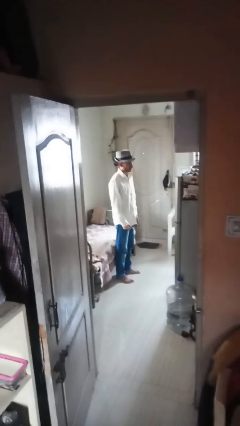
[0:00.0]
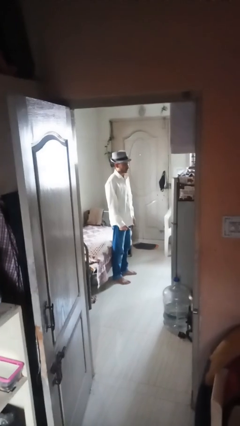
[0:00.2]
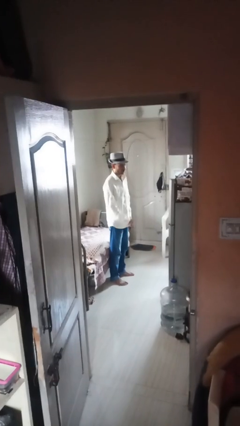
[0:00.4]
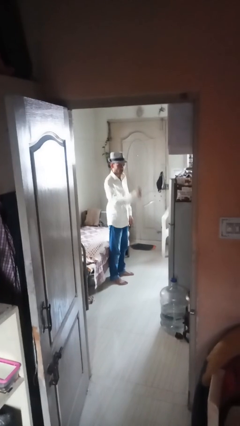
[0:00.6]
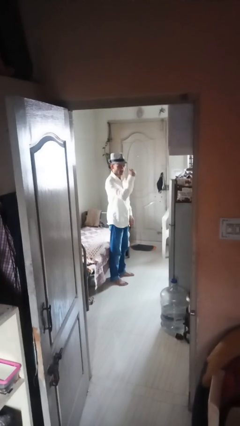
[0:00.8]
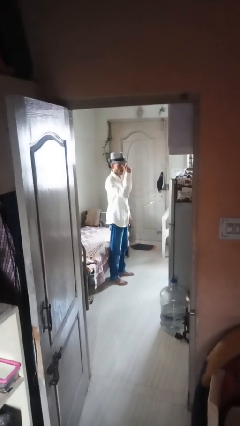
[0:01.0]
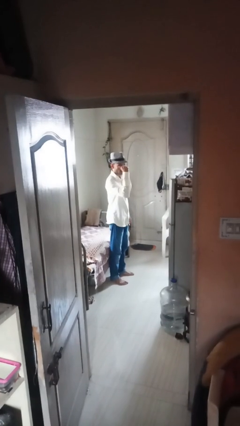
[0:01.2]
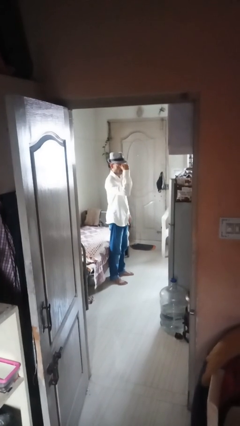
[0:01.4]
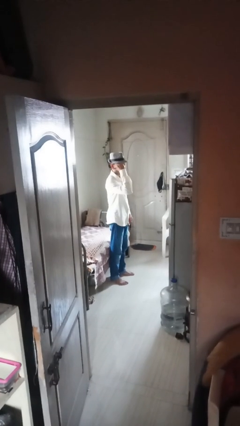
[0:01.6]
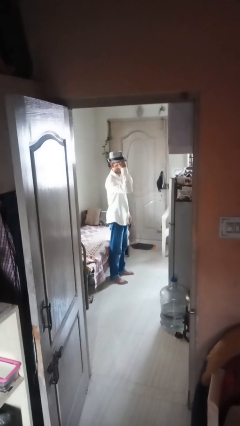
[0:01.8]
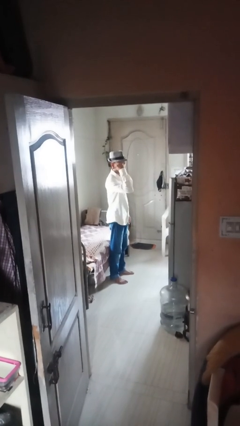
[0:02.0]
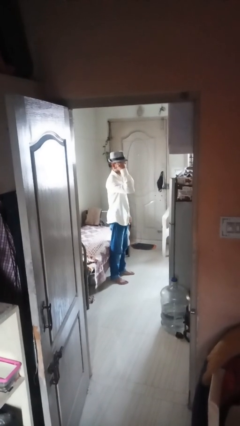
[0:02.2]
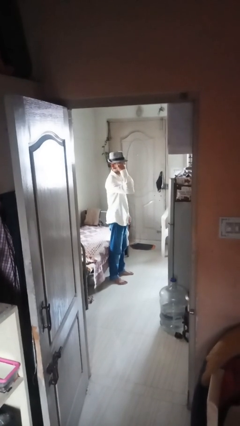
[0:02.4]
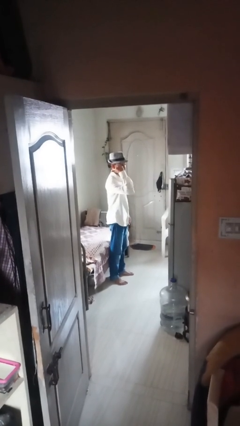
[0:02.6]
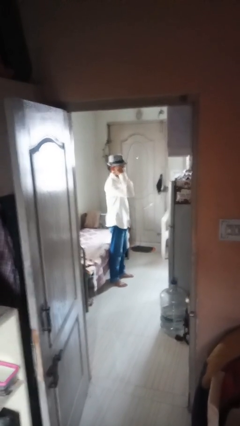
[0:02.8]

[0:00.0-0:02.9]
person gestures behind me

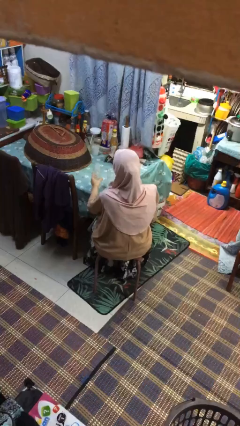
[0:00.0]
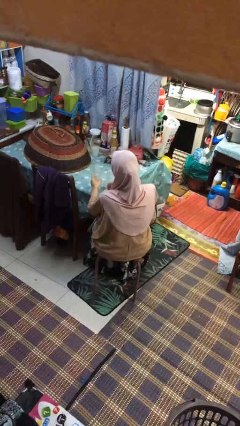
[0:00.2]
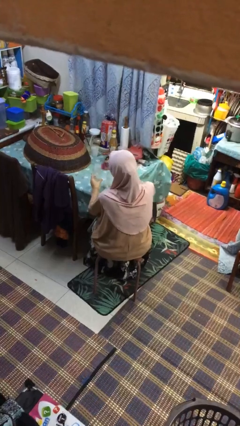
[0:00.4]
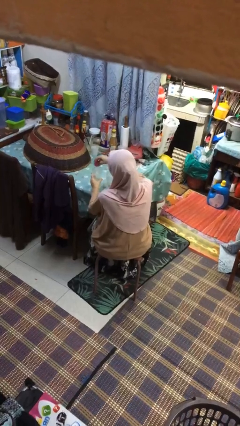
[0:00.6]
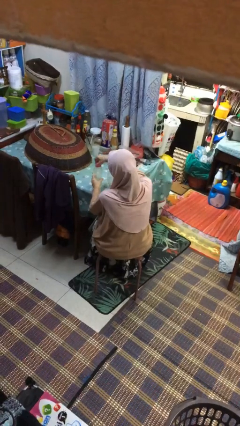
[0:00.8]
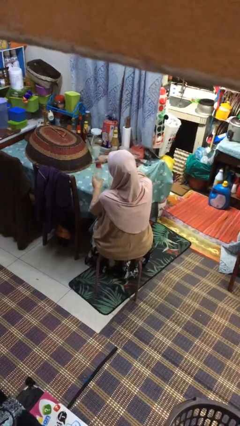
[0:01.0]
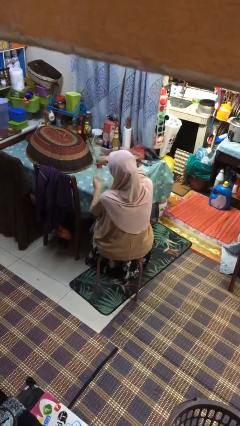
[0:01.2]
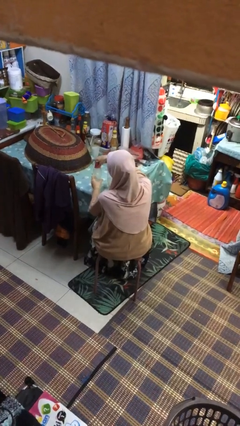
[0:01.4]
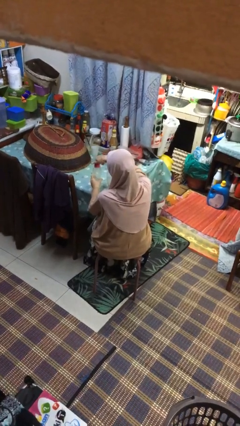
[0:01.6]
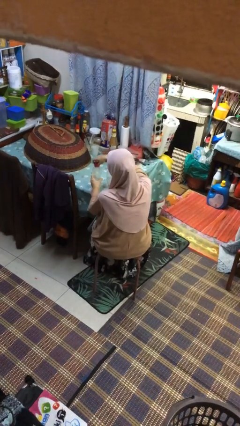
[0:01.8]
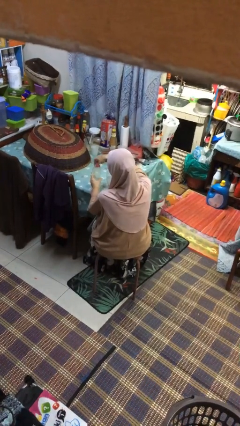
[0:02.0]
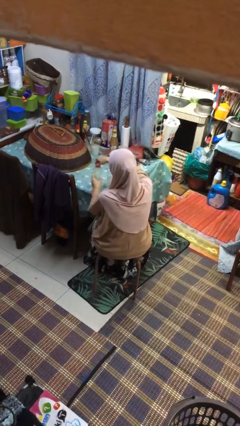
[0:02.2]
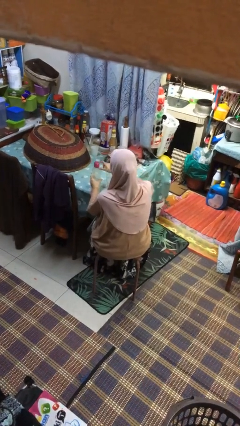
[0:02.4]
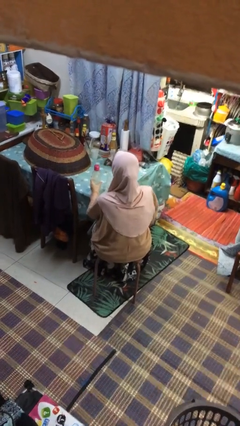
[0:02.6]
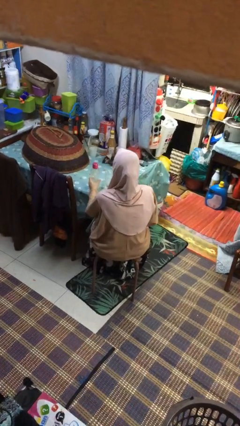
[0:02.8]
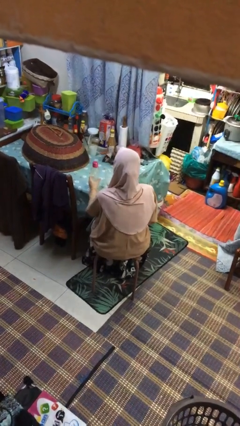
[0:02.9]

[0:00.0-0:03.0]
person screws lid to bottle

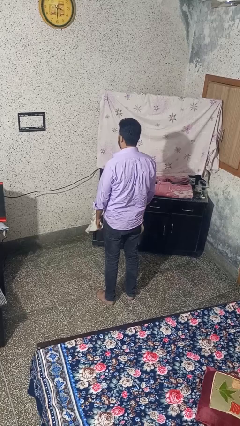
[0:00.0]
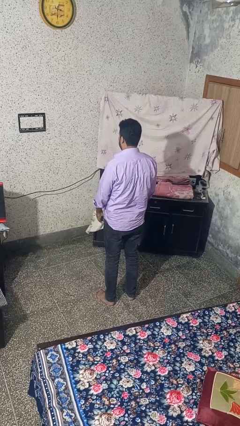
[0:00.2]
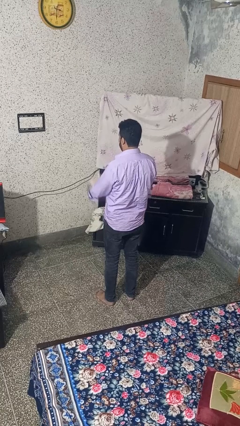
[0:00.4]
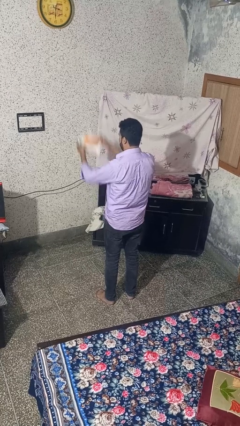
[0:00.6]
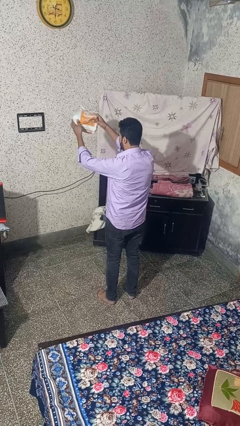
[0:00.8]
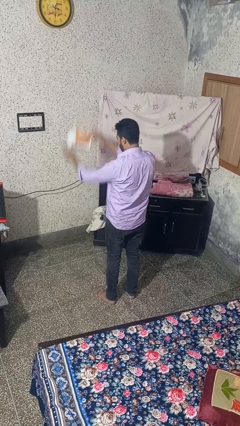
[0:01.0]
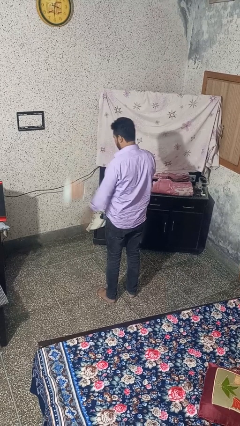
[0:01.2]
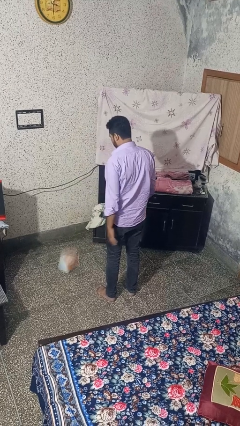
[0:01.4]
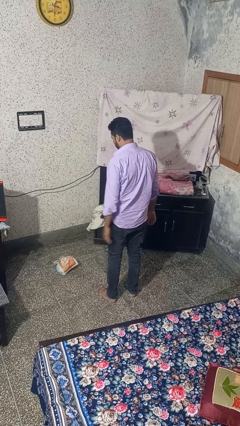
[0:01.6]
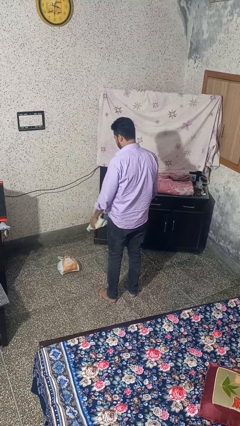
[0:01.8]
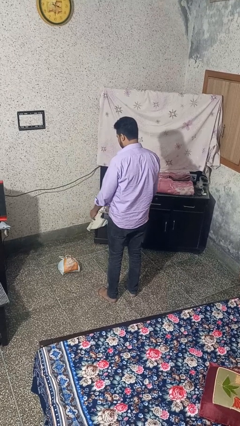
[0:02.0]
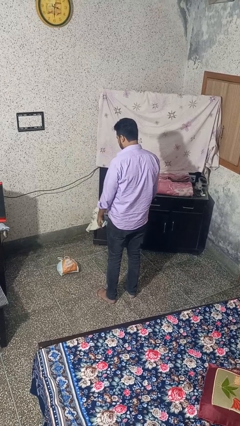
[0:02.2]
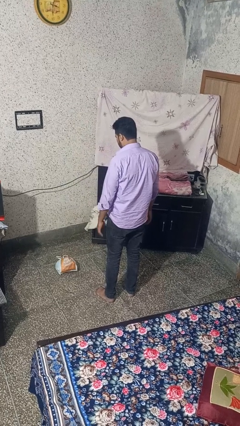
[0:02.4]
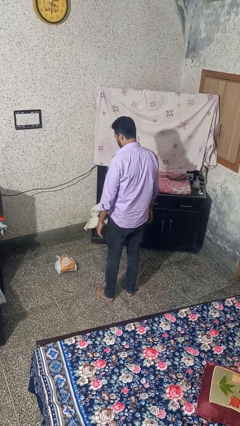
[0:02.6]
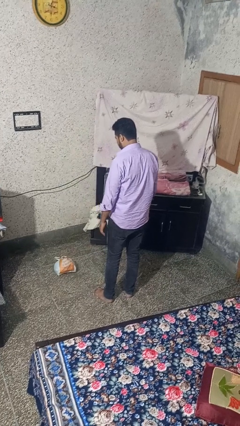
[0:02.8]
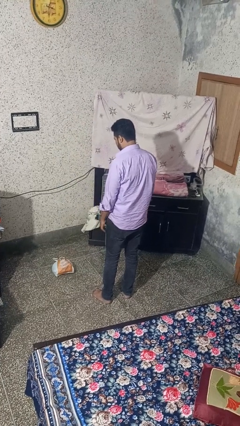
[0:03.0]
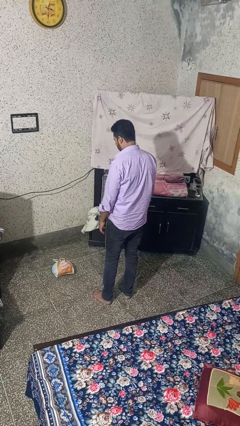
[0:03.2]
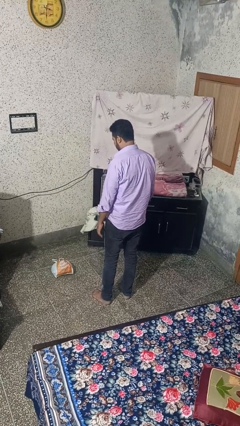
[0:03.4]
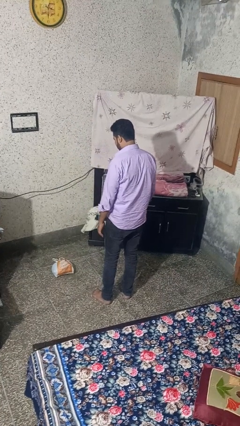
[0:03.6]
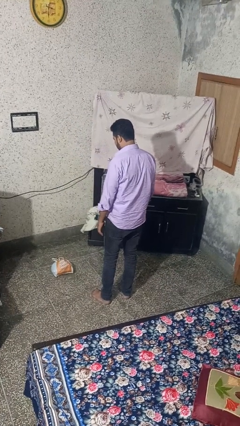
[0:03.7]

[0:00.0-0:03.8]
person throws object to ground

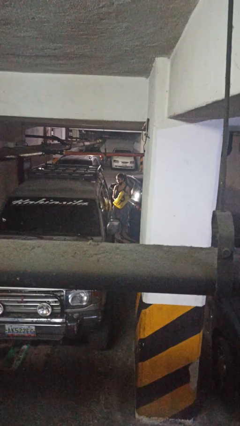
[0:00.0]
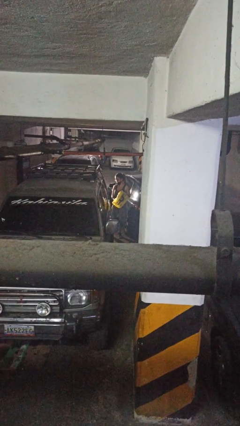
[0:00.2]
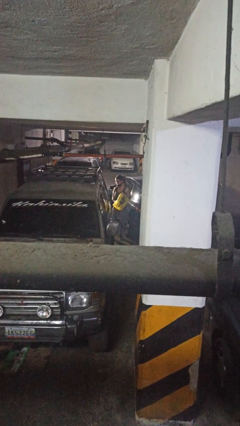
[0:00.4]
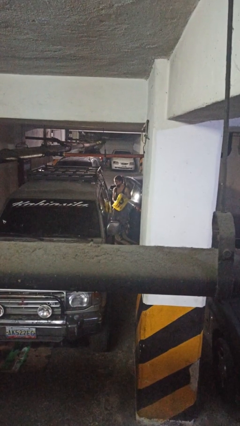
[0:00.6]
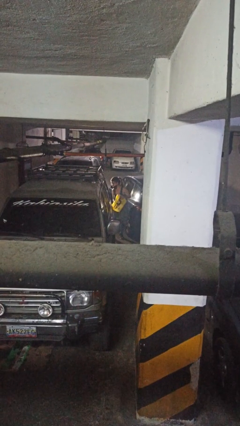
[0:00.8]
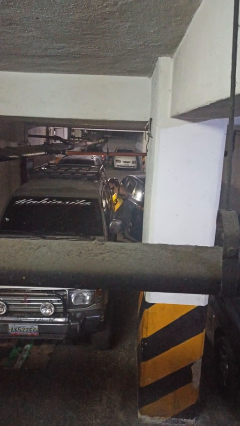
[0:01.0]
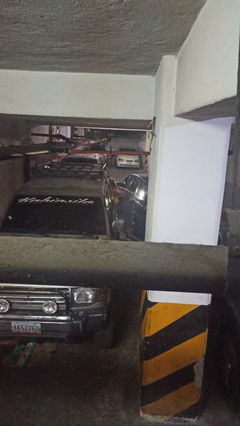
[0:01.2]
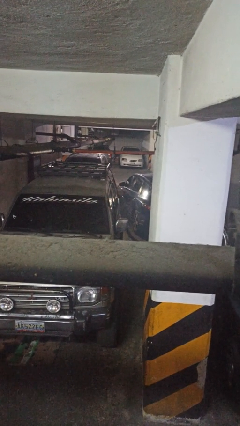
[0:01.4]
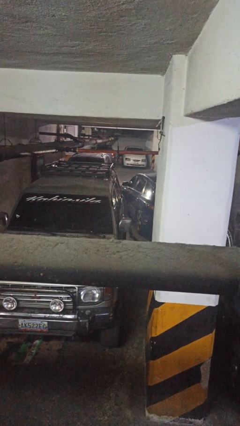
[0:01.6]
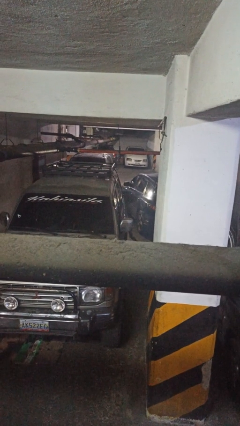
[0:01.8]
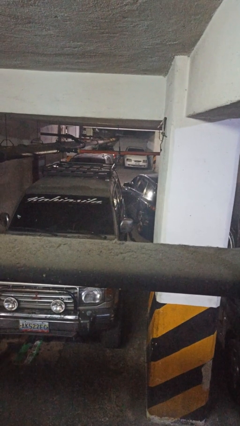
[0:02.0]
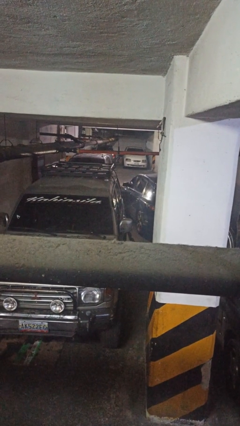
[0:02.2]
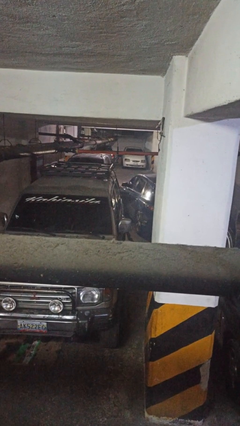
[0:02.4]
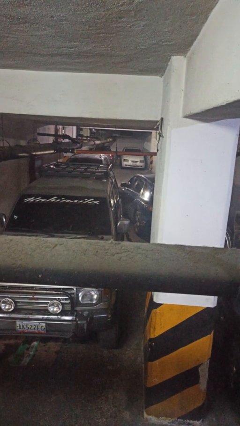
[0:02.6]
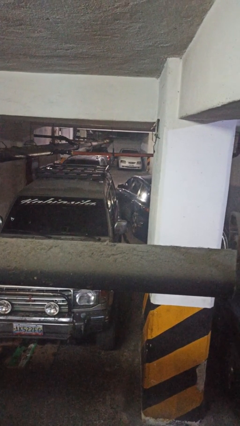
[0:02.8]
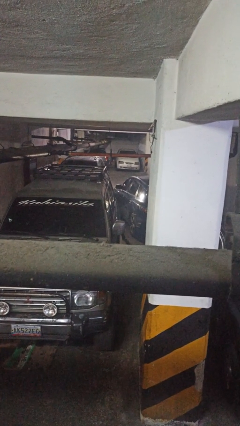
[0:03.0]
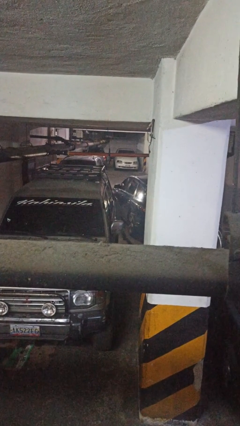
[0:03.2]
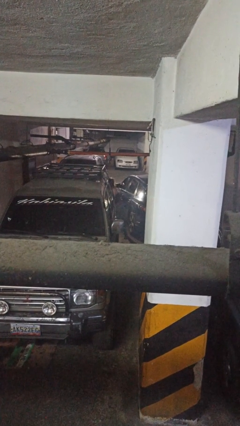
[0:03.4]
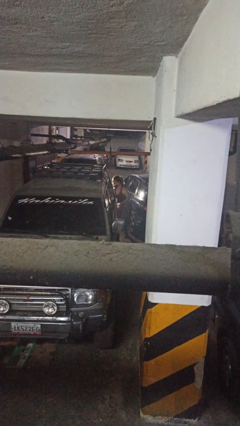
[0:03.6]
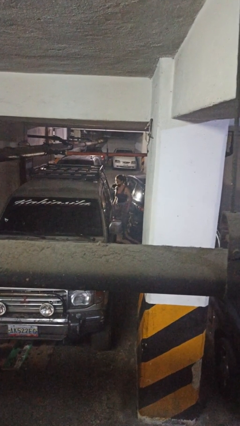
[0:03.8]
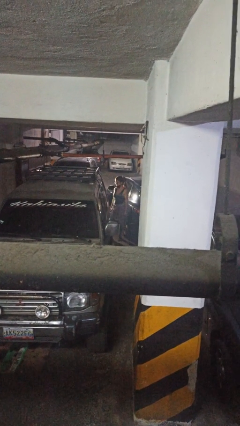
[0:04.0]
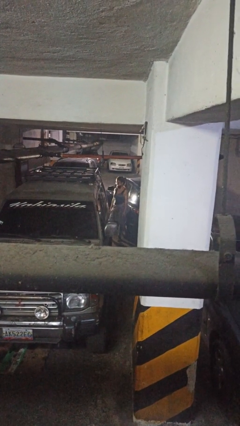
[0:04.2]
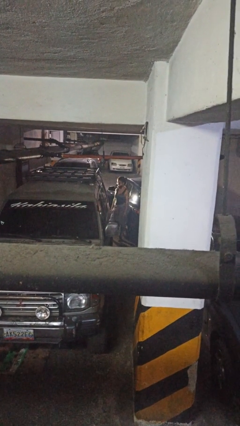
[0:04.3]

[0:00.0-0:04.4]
person loads car

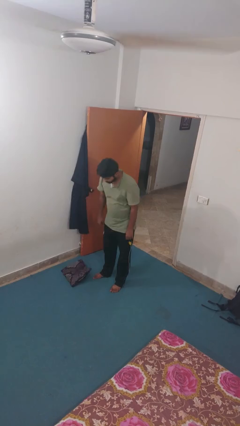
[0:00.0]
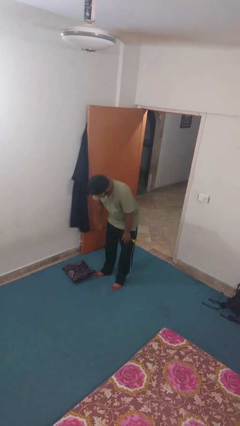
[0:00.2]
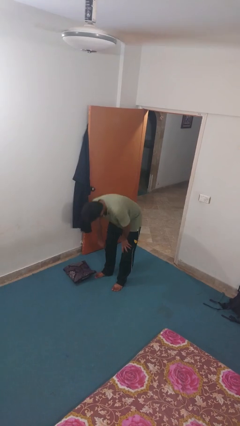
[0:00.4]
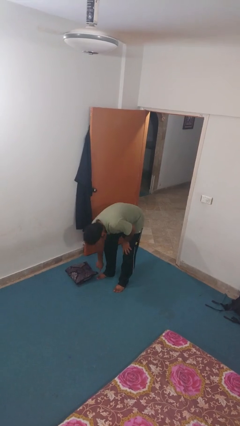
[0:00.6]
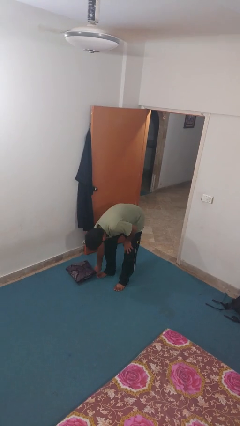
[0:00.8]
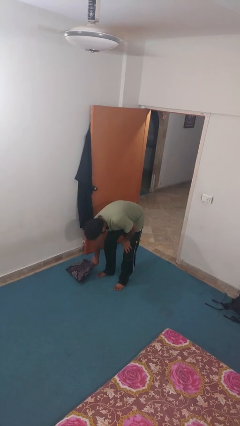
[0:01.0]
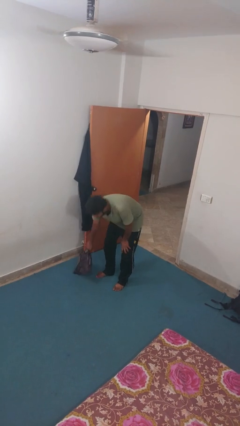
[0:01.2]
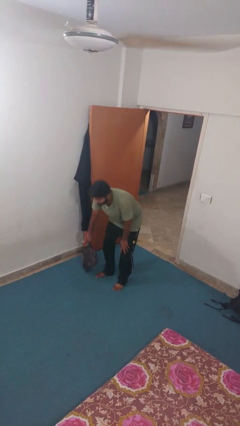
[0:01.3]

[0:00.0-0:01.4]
person picks up object from floor

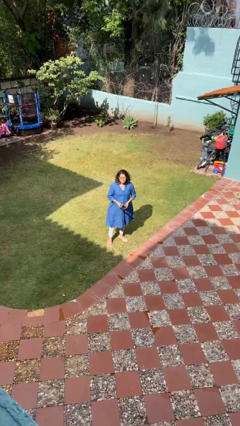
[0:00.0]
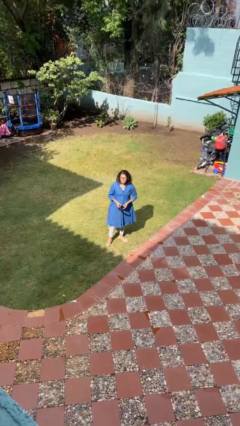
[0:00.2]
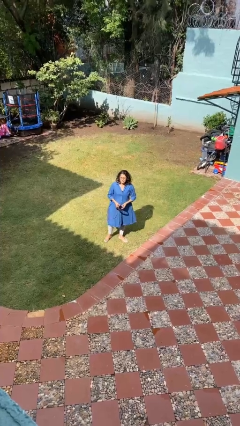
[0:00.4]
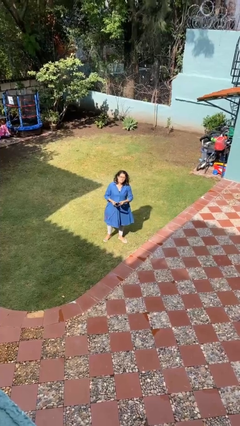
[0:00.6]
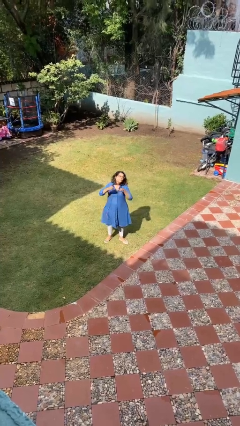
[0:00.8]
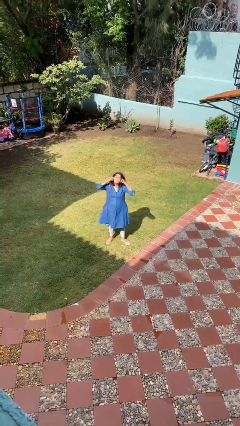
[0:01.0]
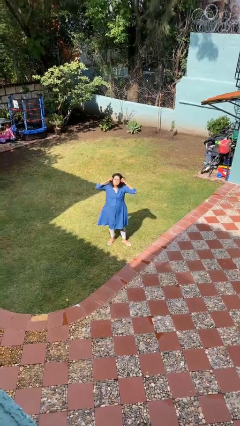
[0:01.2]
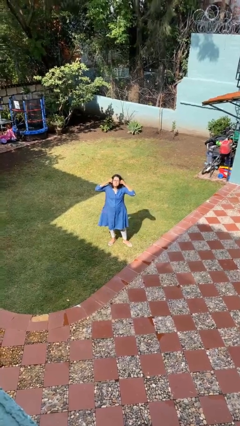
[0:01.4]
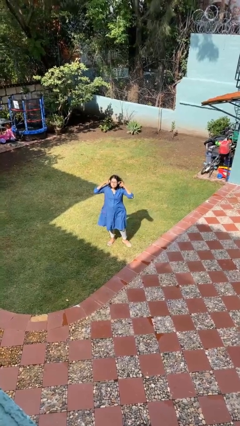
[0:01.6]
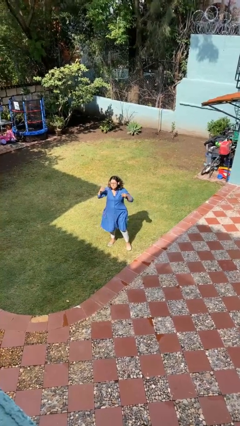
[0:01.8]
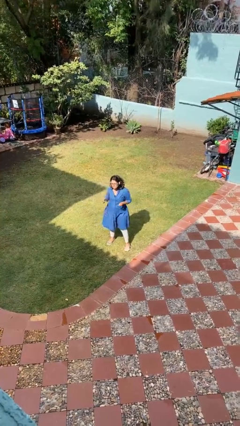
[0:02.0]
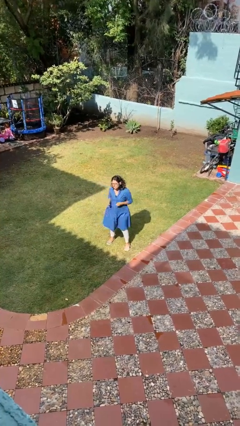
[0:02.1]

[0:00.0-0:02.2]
person puts on headphones
